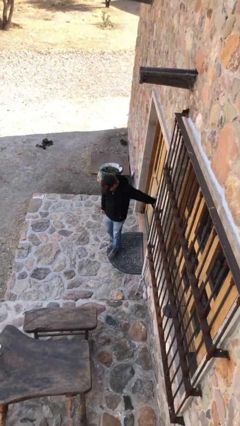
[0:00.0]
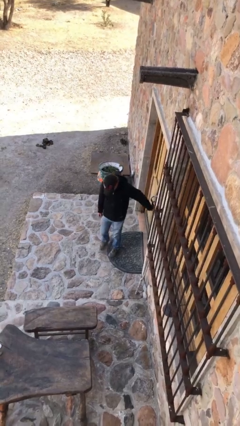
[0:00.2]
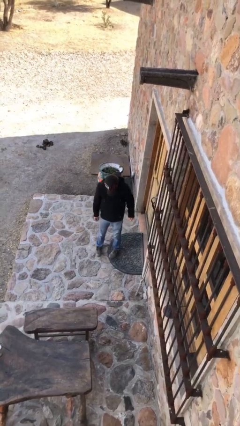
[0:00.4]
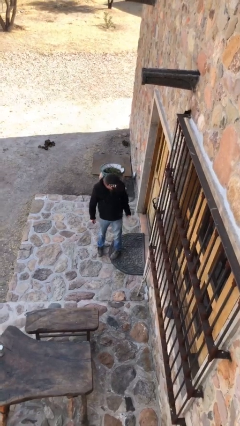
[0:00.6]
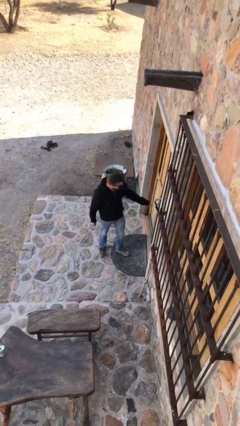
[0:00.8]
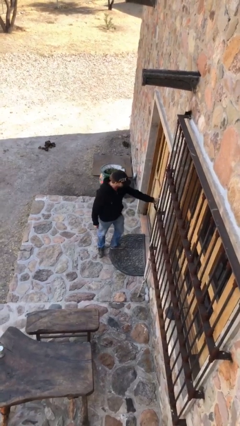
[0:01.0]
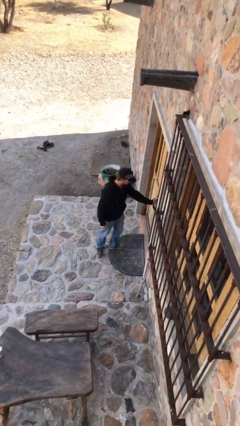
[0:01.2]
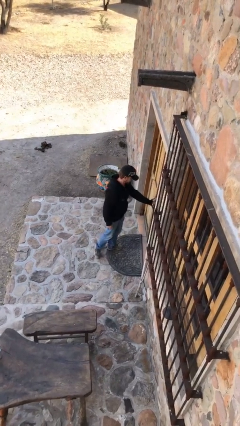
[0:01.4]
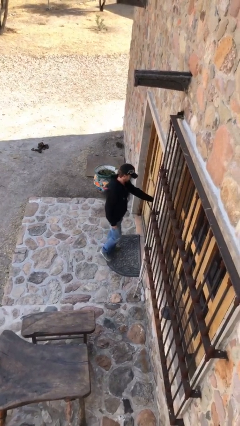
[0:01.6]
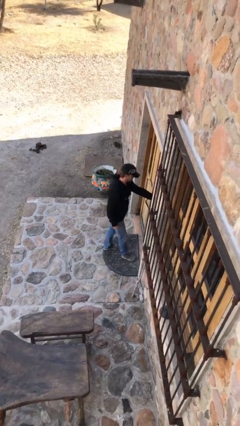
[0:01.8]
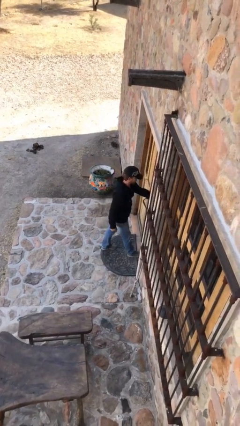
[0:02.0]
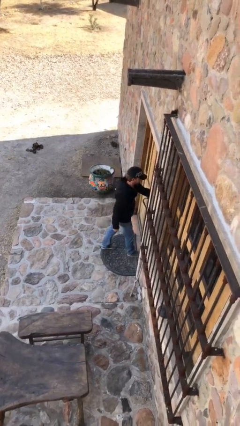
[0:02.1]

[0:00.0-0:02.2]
person opens facility door

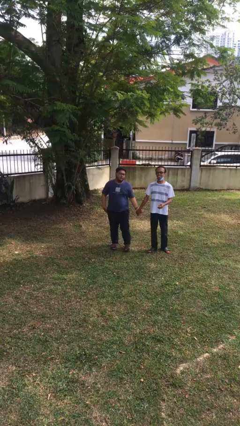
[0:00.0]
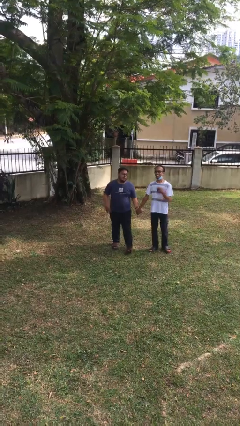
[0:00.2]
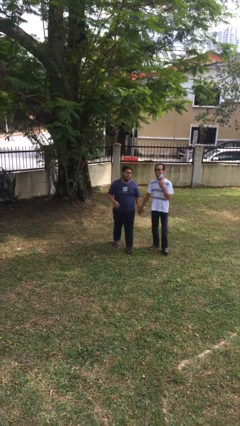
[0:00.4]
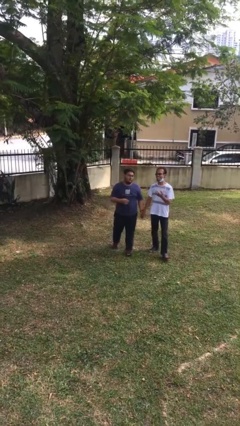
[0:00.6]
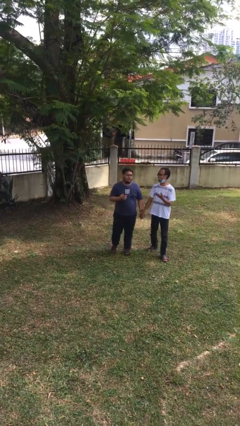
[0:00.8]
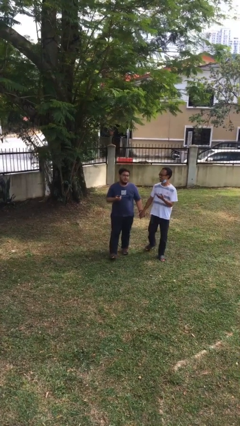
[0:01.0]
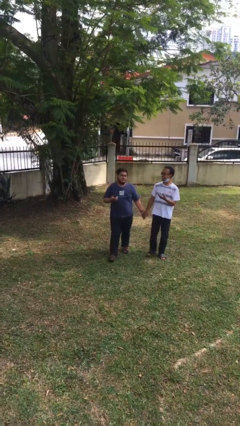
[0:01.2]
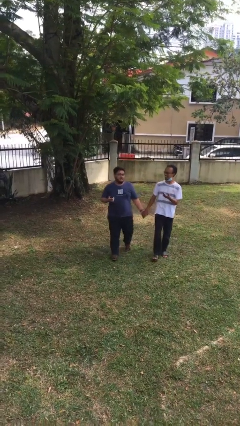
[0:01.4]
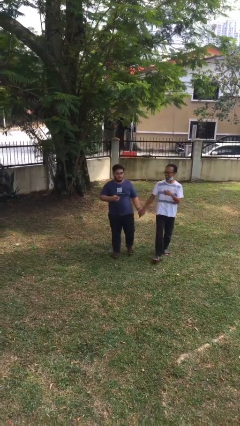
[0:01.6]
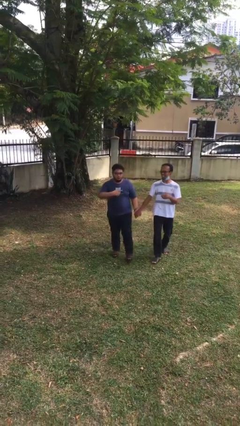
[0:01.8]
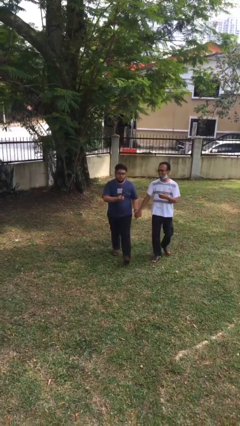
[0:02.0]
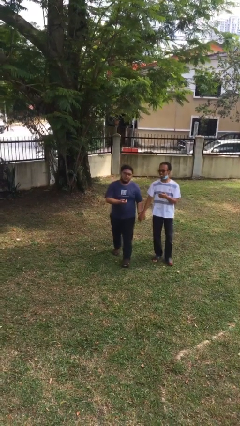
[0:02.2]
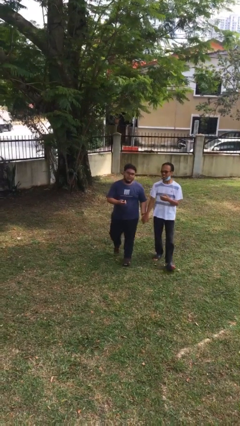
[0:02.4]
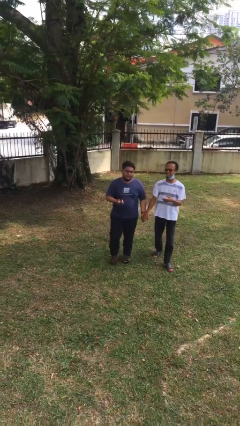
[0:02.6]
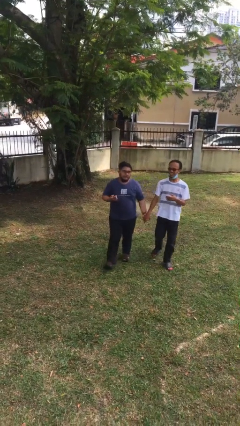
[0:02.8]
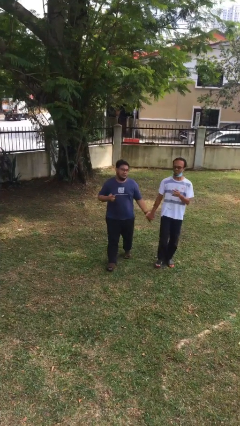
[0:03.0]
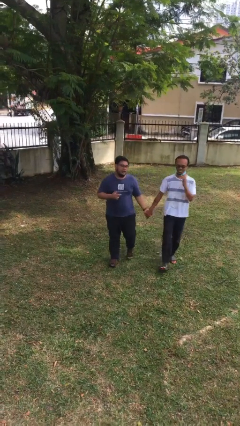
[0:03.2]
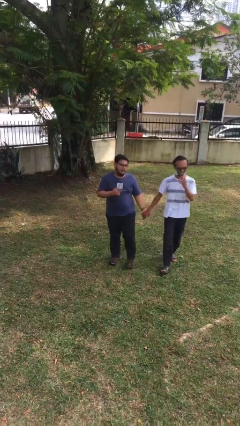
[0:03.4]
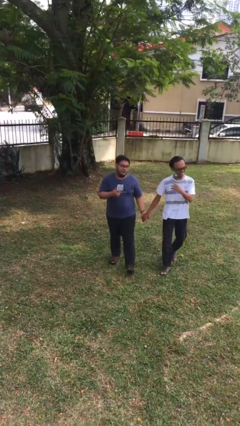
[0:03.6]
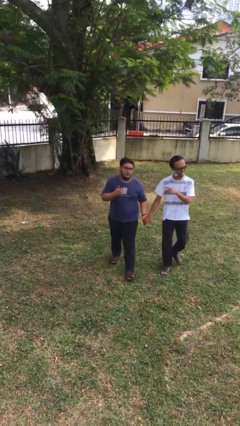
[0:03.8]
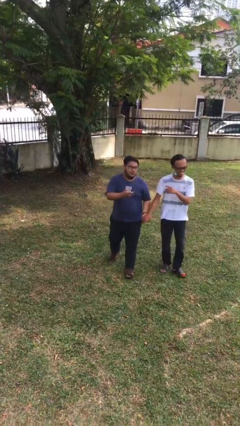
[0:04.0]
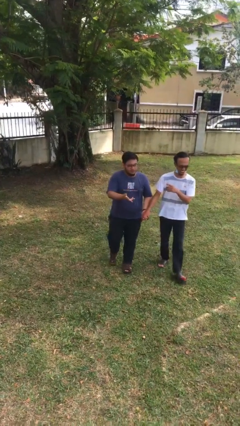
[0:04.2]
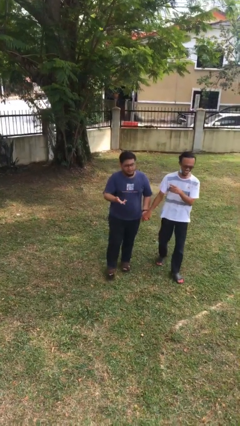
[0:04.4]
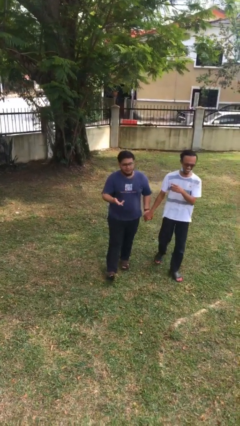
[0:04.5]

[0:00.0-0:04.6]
person holds hand

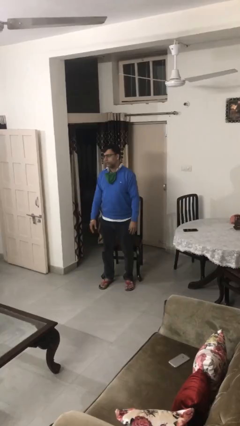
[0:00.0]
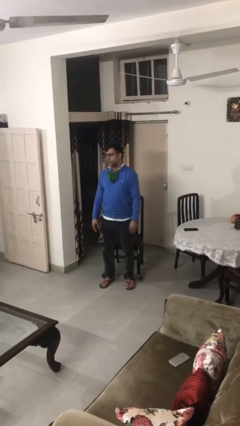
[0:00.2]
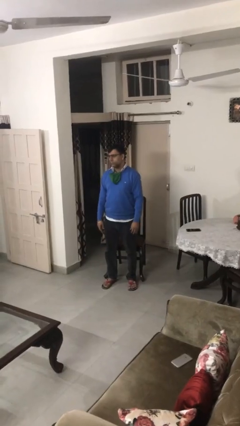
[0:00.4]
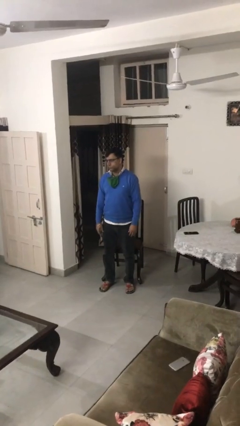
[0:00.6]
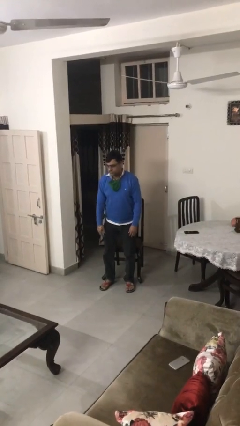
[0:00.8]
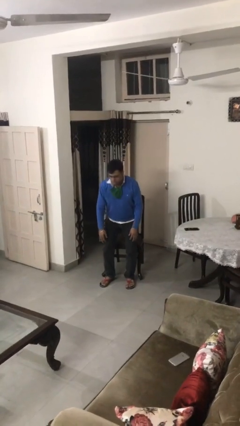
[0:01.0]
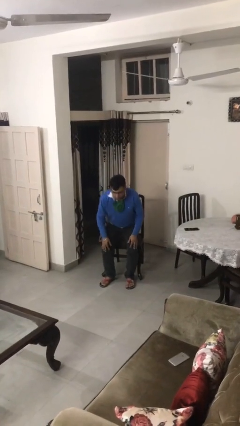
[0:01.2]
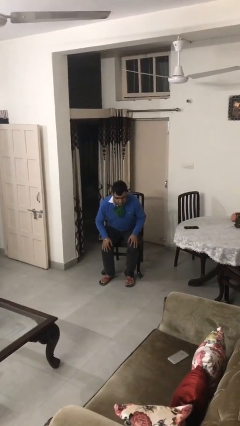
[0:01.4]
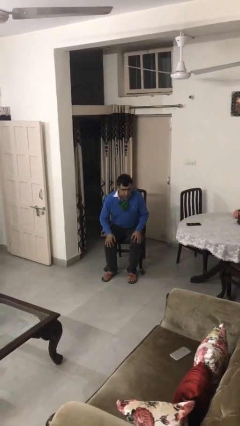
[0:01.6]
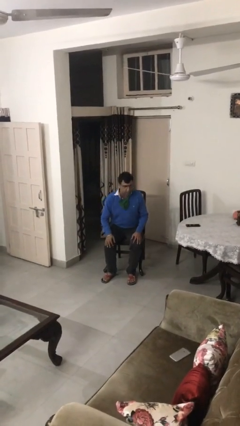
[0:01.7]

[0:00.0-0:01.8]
person sits down

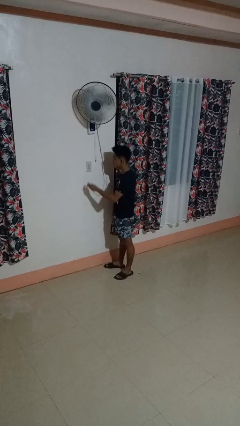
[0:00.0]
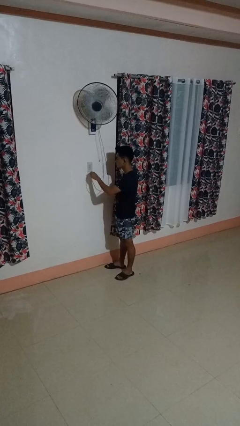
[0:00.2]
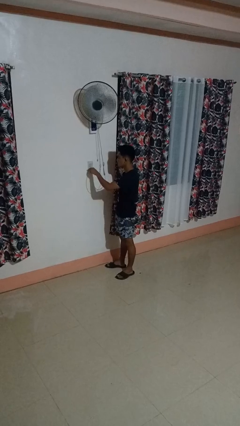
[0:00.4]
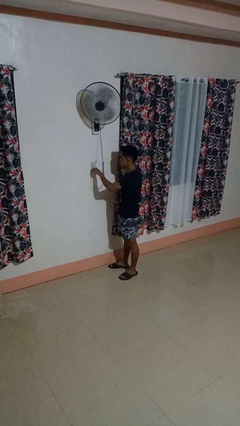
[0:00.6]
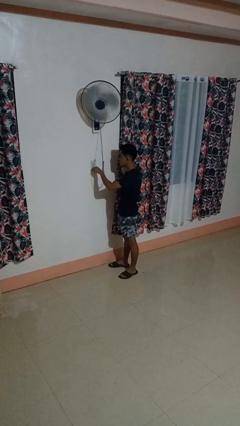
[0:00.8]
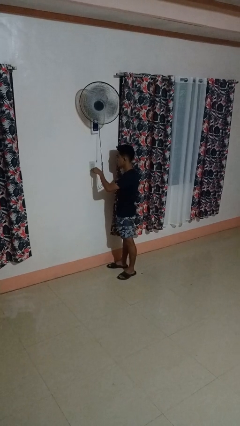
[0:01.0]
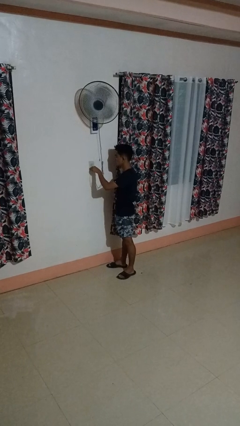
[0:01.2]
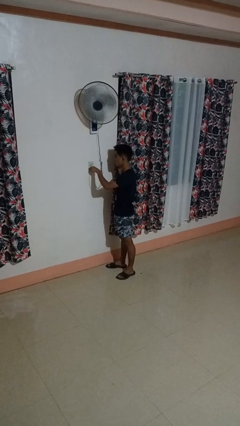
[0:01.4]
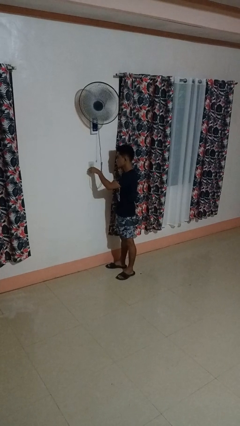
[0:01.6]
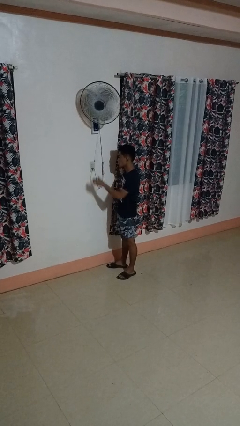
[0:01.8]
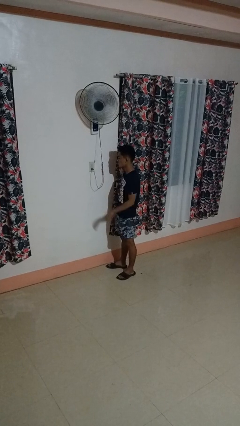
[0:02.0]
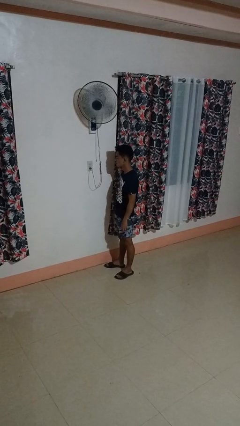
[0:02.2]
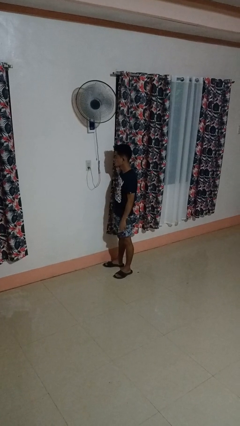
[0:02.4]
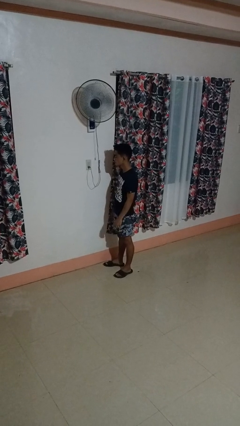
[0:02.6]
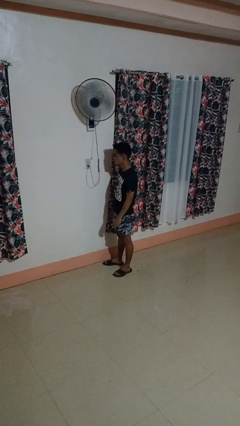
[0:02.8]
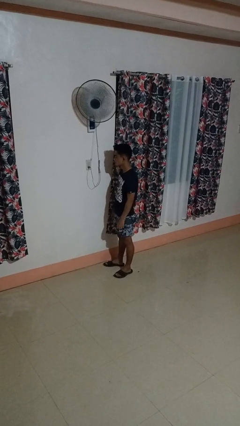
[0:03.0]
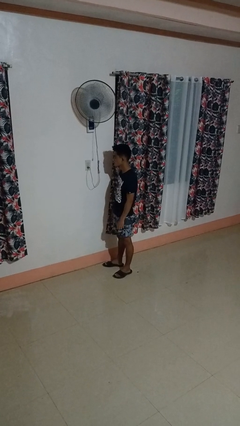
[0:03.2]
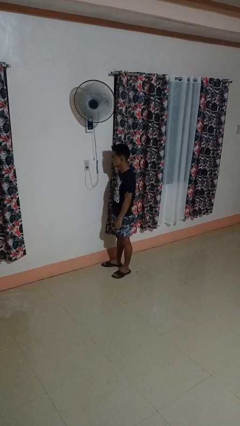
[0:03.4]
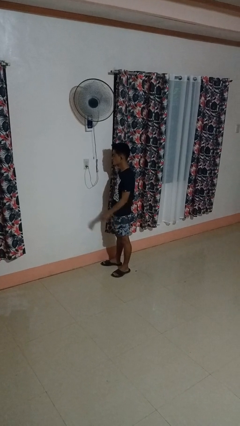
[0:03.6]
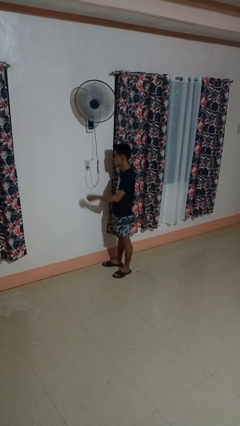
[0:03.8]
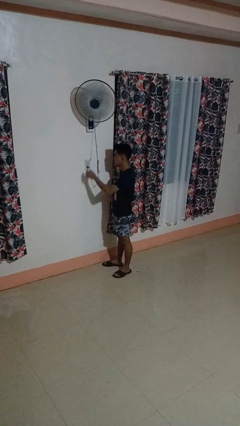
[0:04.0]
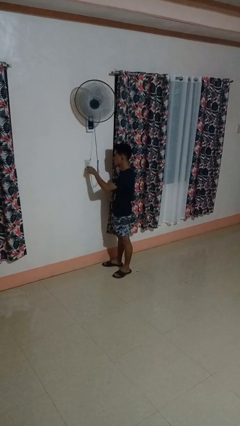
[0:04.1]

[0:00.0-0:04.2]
person plugs into electrical socket

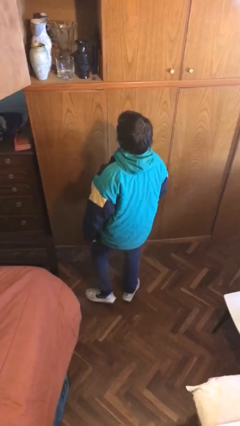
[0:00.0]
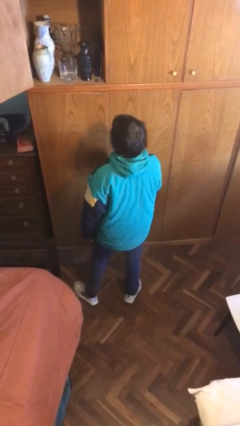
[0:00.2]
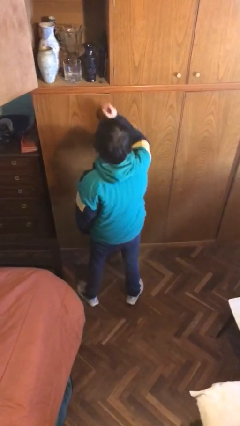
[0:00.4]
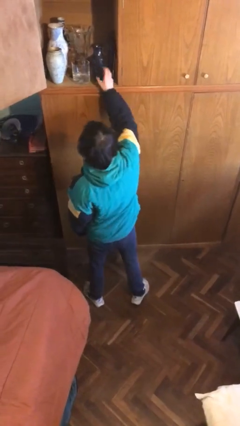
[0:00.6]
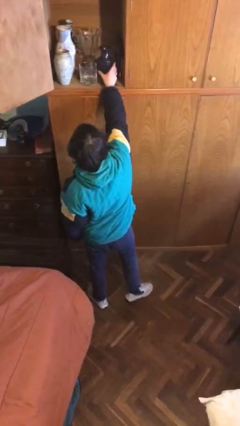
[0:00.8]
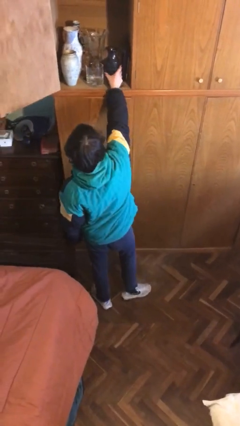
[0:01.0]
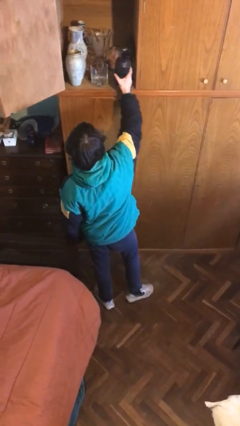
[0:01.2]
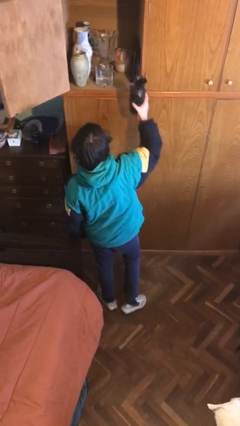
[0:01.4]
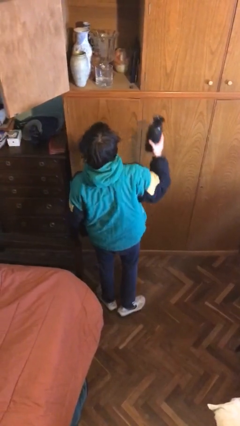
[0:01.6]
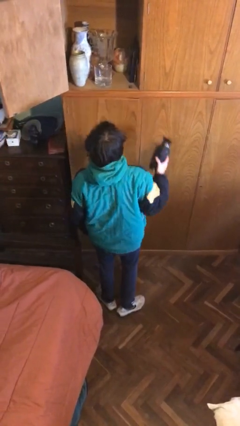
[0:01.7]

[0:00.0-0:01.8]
person picks up object from cabinet

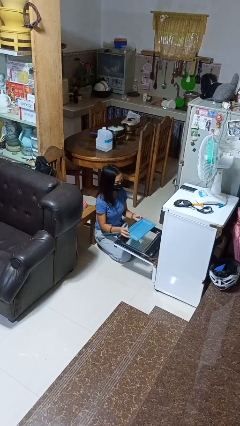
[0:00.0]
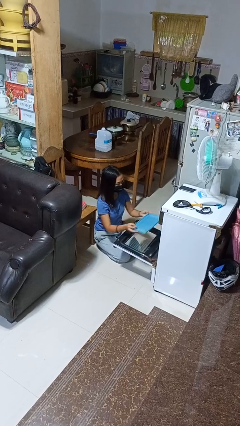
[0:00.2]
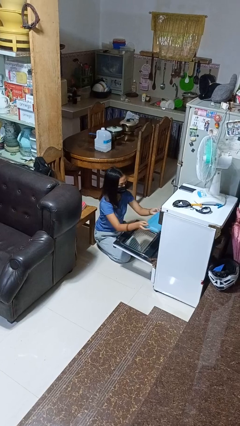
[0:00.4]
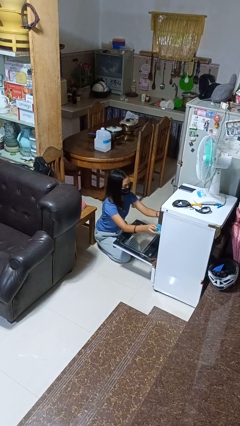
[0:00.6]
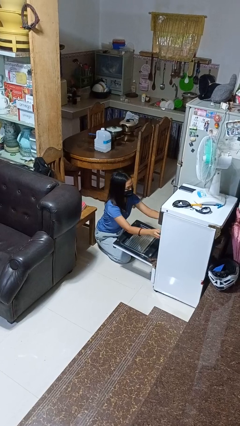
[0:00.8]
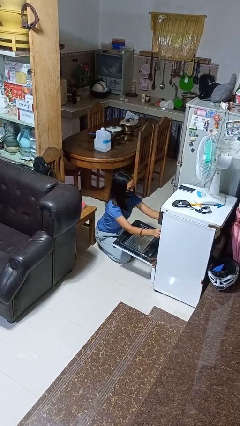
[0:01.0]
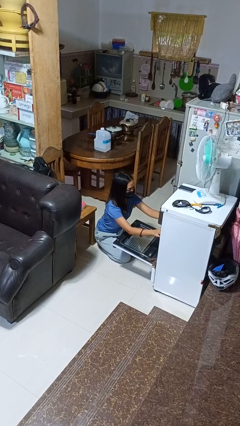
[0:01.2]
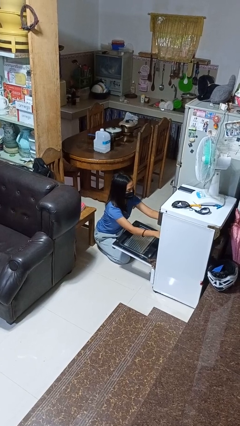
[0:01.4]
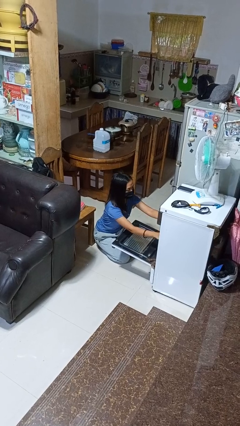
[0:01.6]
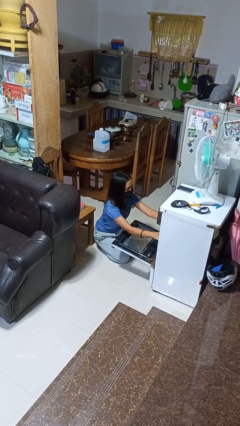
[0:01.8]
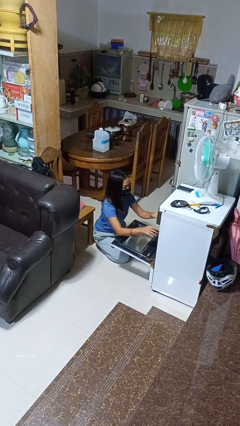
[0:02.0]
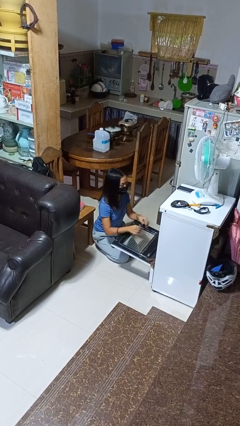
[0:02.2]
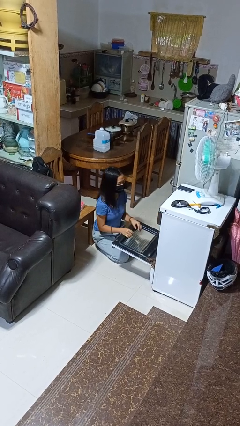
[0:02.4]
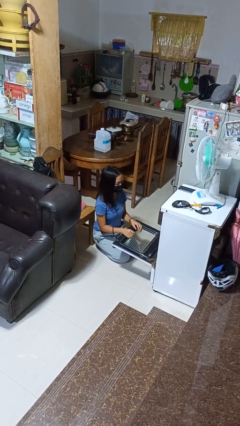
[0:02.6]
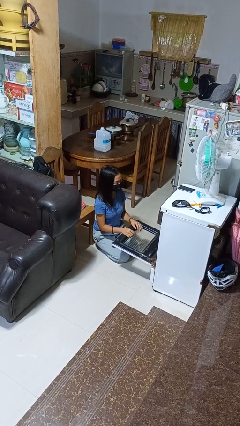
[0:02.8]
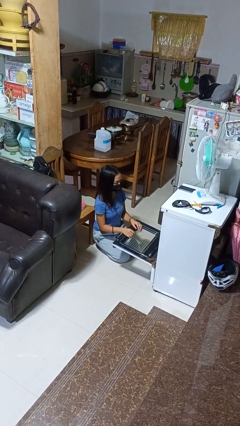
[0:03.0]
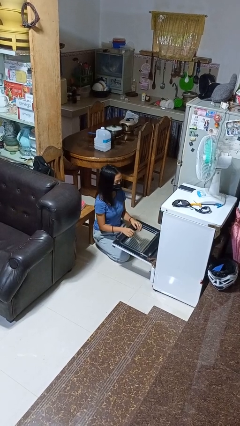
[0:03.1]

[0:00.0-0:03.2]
person puts object into oven
